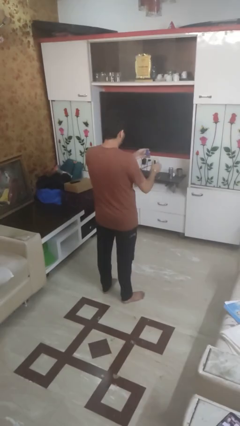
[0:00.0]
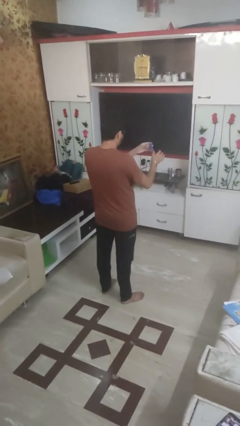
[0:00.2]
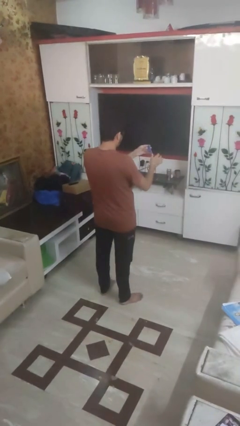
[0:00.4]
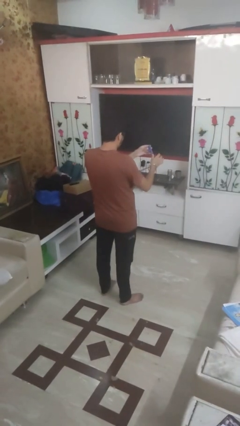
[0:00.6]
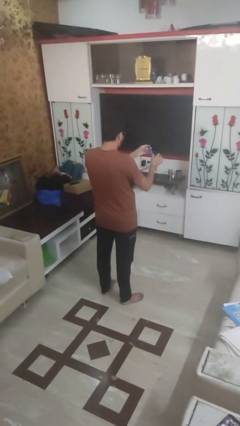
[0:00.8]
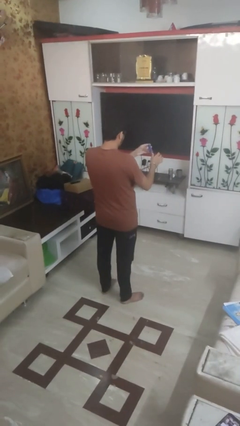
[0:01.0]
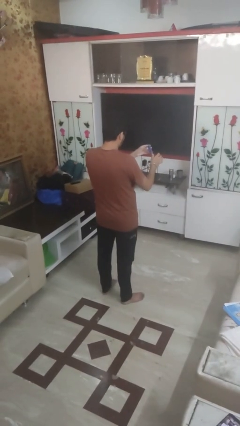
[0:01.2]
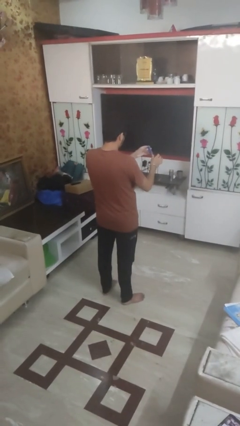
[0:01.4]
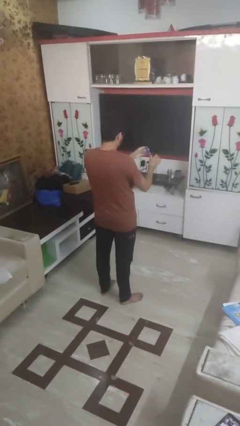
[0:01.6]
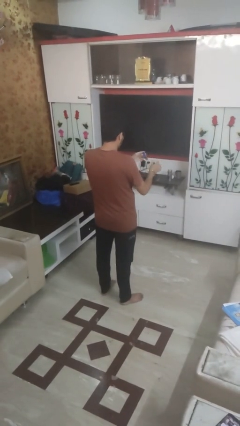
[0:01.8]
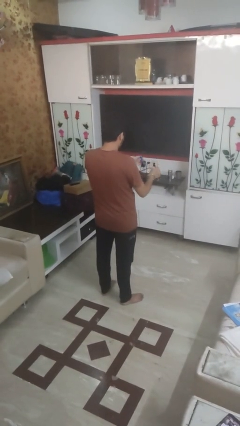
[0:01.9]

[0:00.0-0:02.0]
person clips fingernails

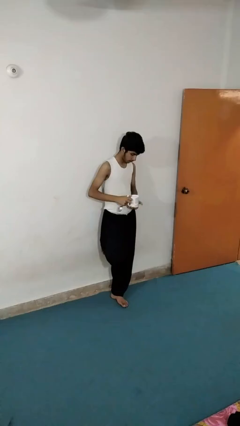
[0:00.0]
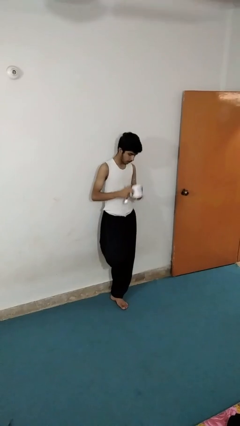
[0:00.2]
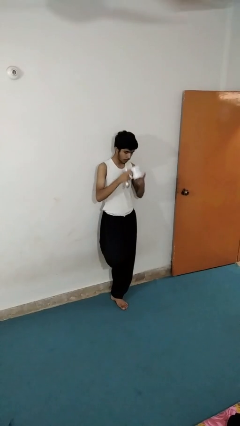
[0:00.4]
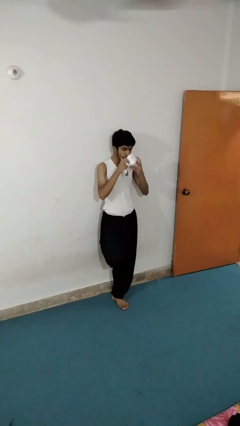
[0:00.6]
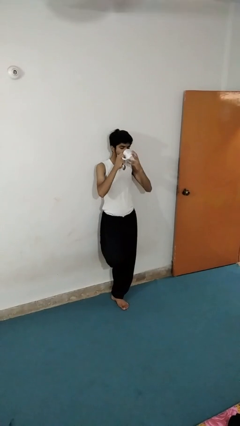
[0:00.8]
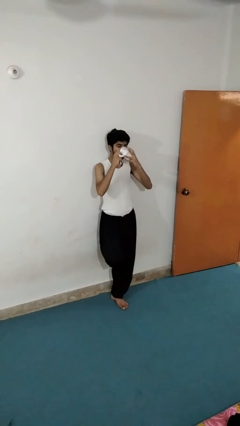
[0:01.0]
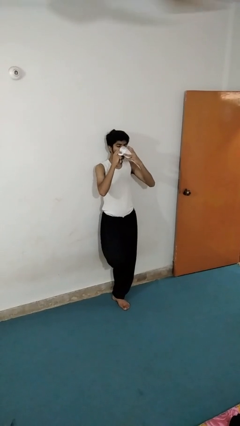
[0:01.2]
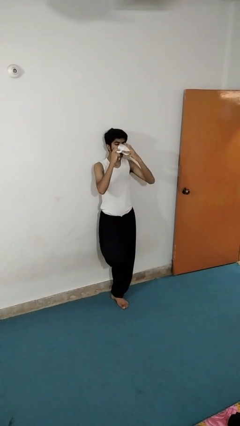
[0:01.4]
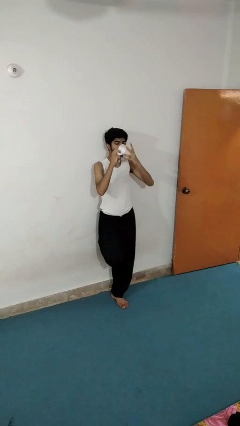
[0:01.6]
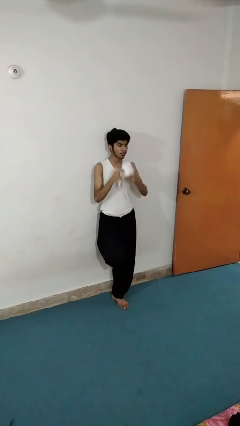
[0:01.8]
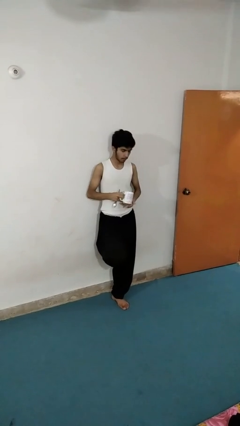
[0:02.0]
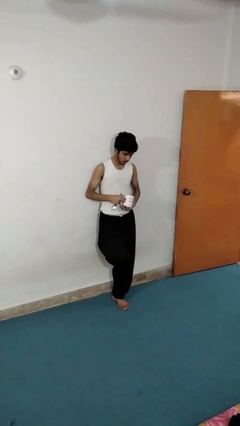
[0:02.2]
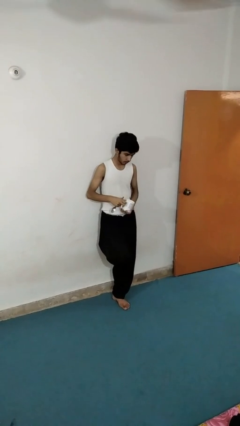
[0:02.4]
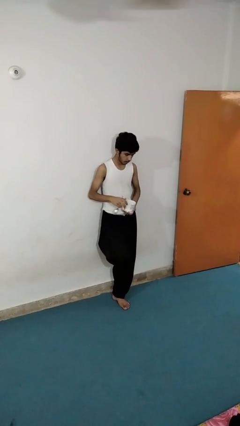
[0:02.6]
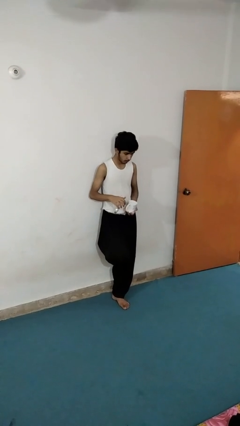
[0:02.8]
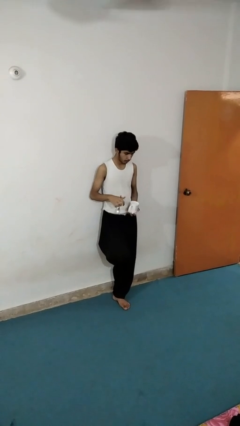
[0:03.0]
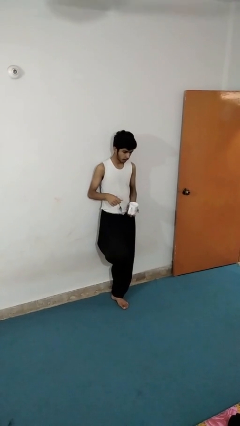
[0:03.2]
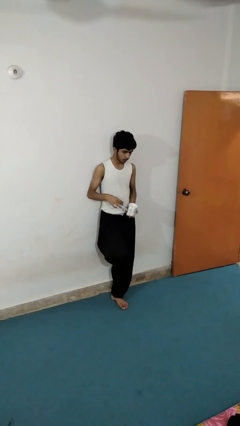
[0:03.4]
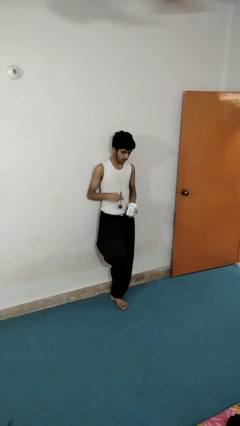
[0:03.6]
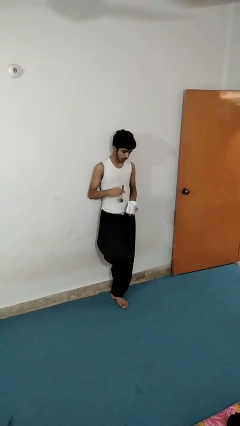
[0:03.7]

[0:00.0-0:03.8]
person drinks from mug

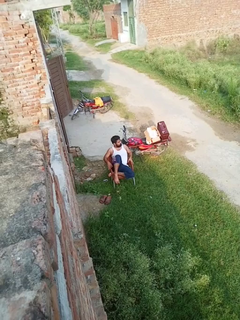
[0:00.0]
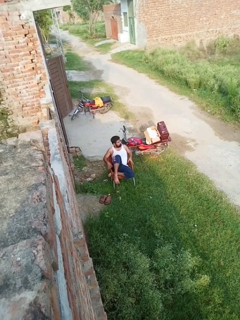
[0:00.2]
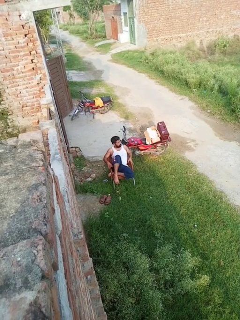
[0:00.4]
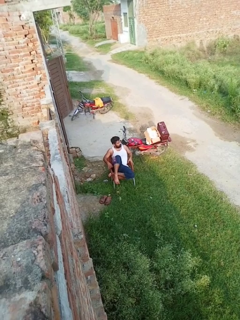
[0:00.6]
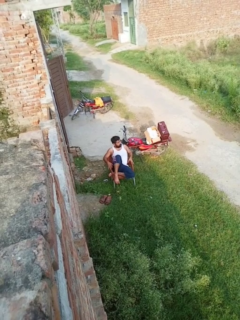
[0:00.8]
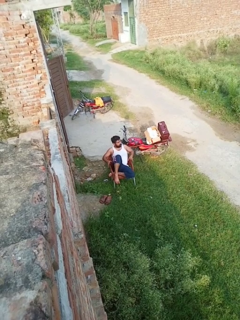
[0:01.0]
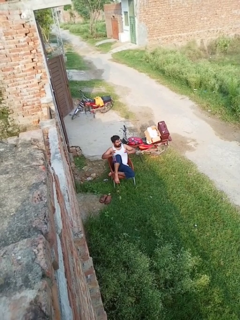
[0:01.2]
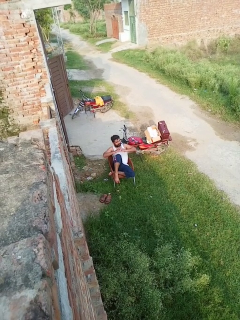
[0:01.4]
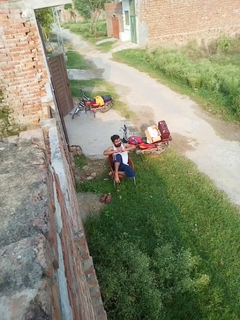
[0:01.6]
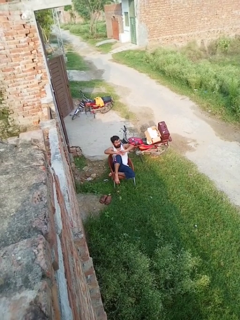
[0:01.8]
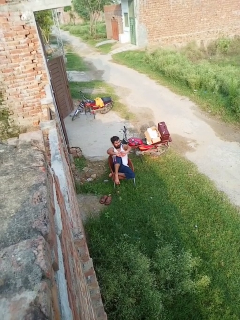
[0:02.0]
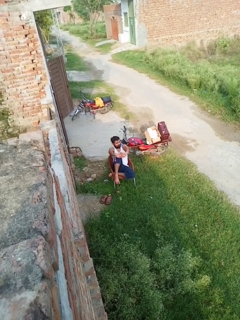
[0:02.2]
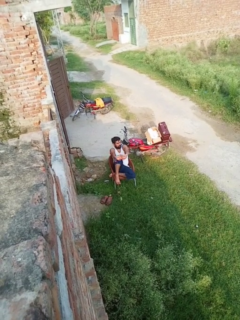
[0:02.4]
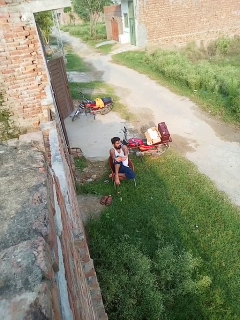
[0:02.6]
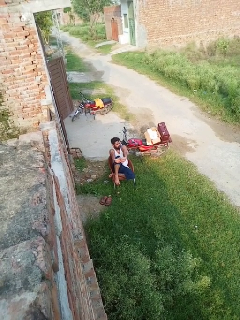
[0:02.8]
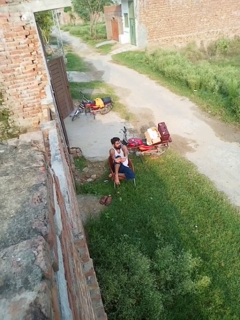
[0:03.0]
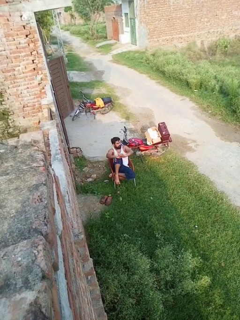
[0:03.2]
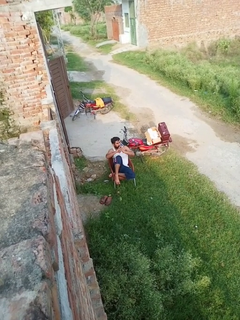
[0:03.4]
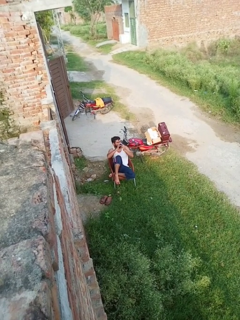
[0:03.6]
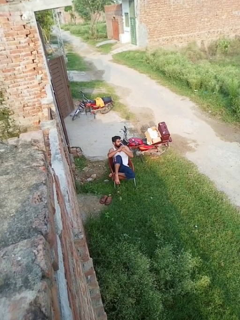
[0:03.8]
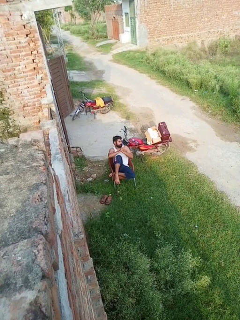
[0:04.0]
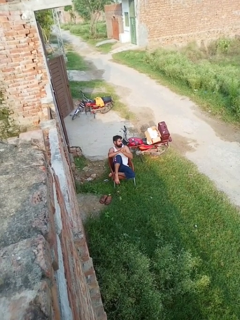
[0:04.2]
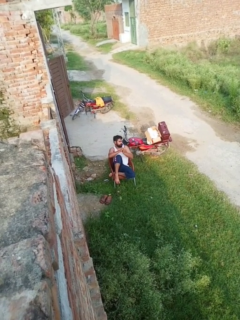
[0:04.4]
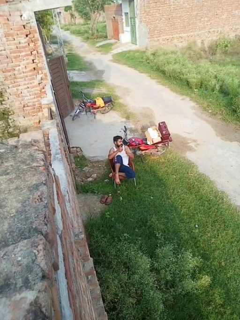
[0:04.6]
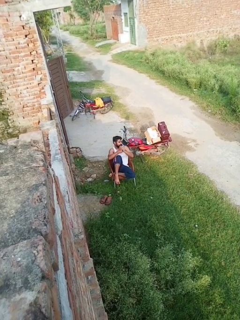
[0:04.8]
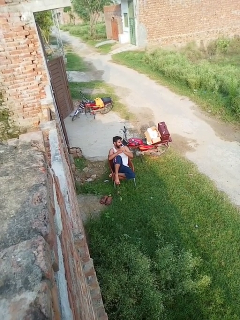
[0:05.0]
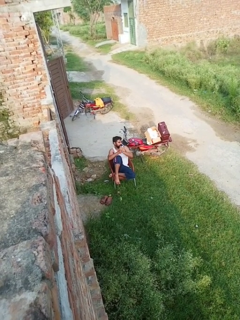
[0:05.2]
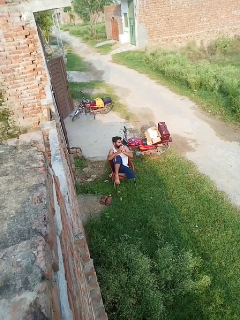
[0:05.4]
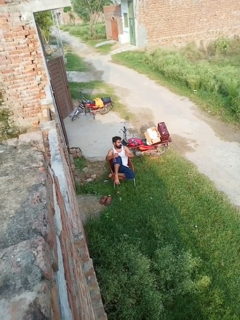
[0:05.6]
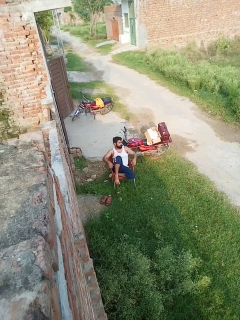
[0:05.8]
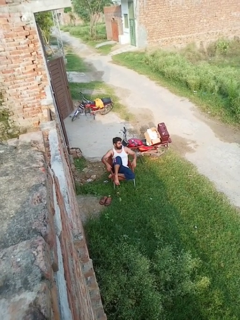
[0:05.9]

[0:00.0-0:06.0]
person cracks knuckles

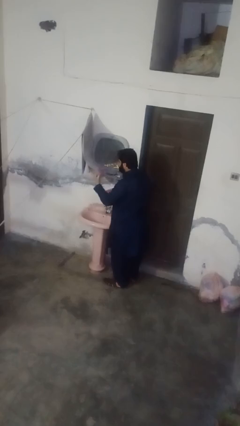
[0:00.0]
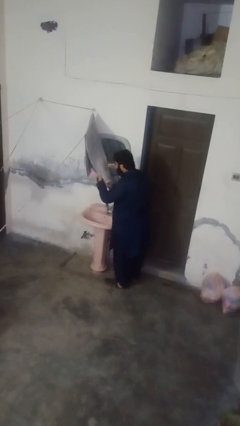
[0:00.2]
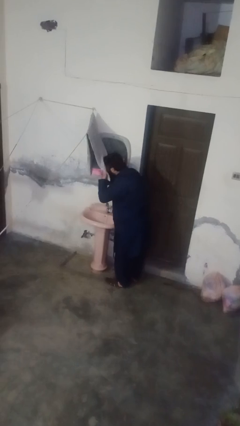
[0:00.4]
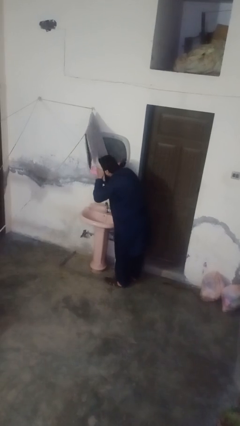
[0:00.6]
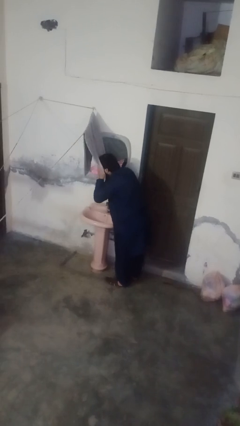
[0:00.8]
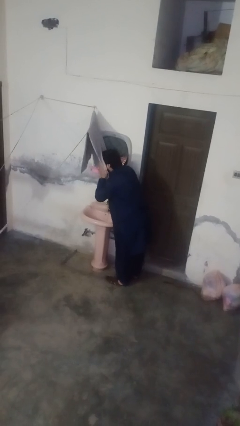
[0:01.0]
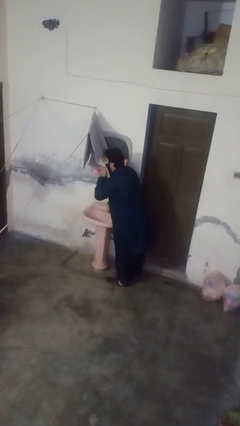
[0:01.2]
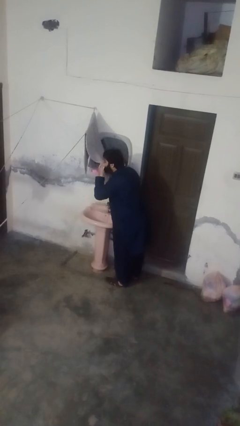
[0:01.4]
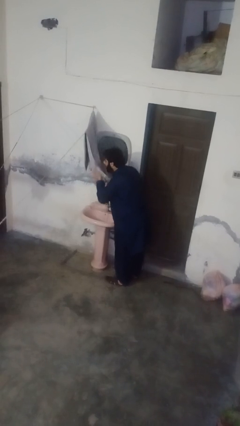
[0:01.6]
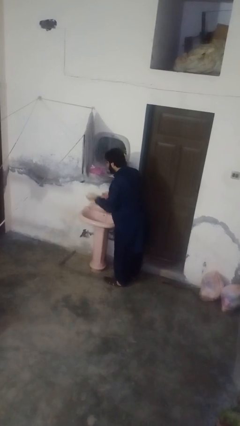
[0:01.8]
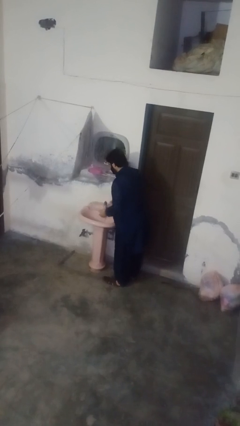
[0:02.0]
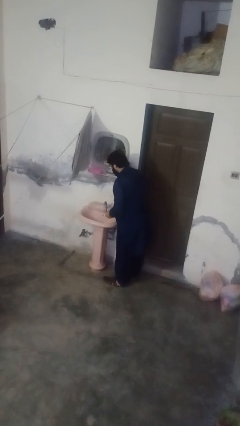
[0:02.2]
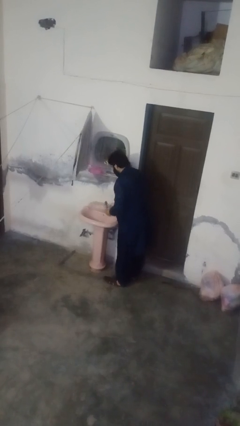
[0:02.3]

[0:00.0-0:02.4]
person dries face with towel

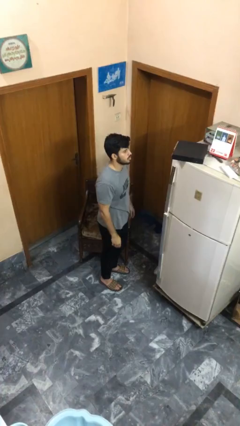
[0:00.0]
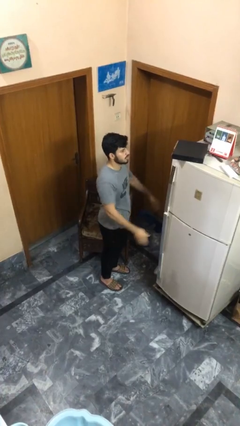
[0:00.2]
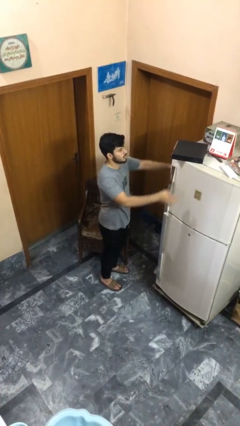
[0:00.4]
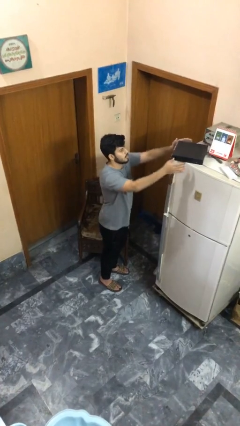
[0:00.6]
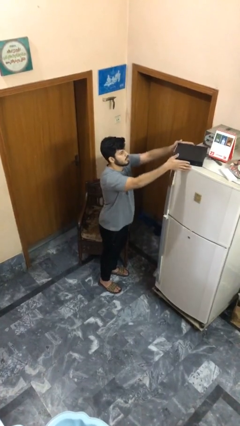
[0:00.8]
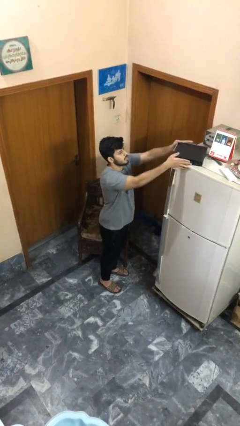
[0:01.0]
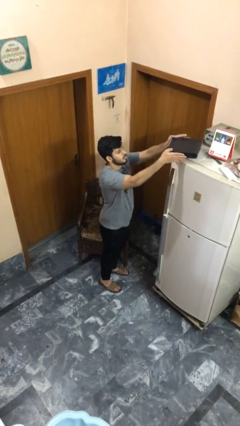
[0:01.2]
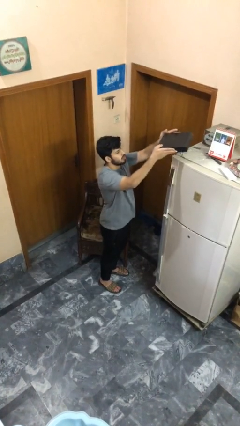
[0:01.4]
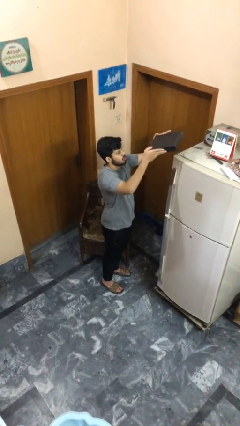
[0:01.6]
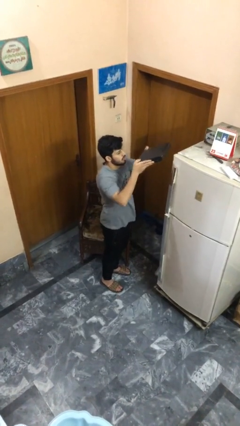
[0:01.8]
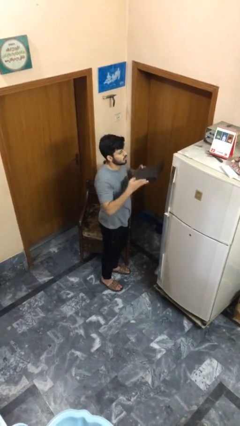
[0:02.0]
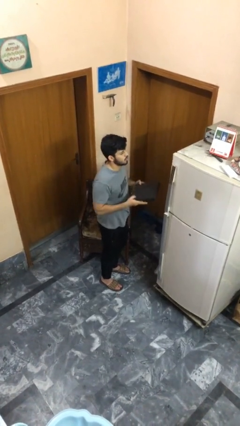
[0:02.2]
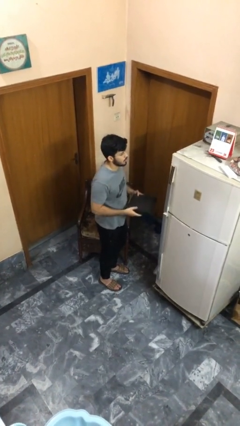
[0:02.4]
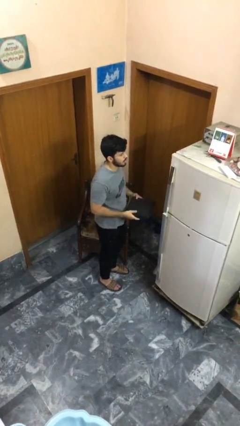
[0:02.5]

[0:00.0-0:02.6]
person picks up object from countertop

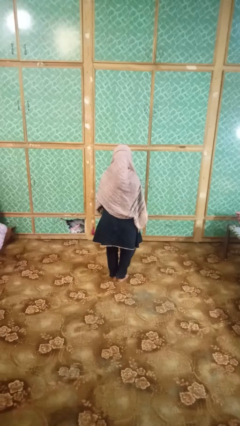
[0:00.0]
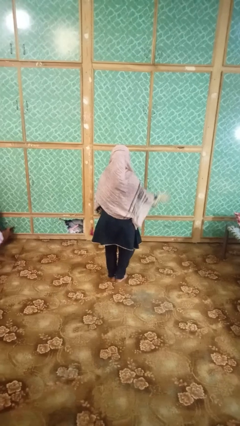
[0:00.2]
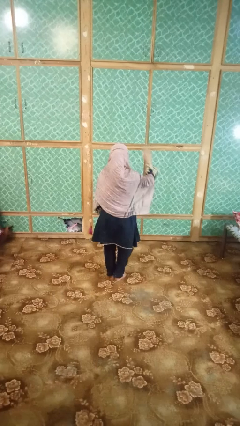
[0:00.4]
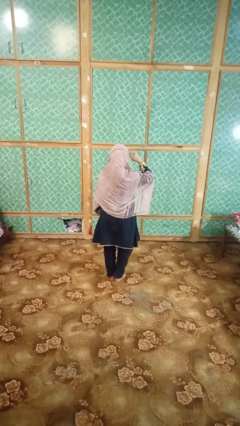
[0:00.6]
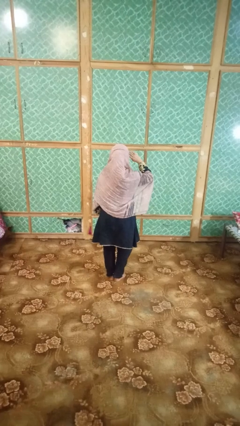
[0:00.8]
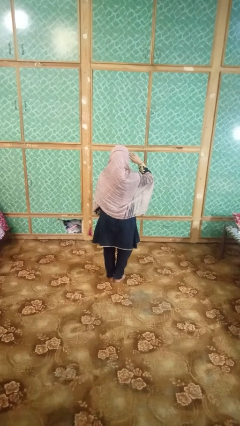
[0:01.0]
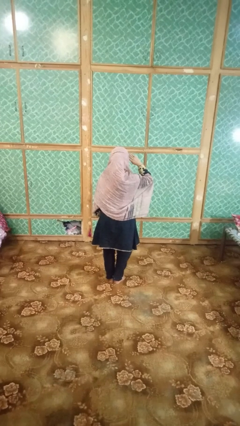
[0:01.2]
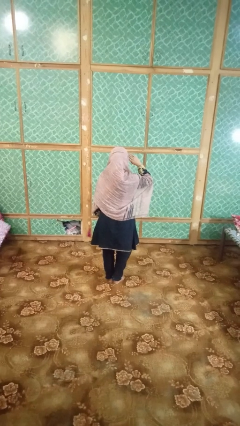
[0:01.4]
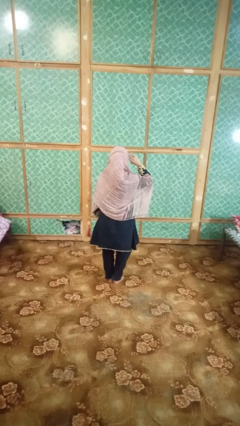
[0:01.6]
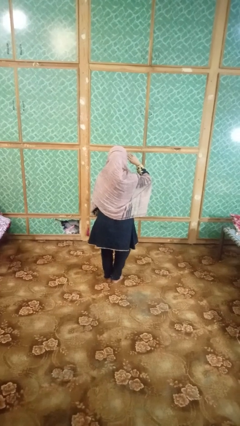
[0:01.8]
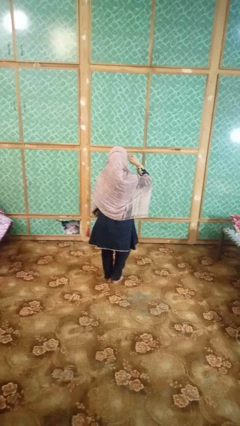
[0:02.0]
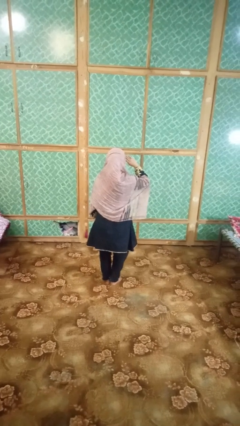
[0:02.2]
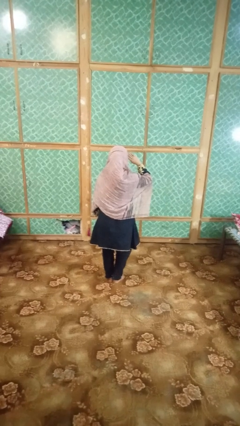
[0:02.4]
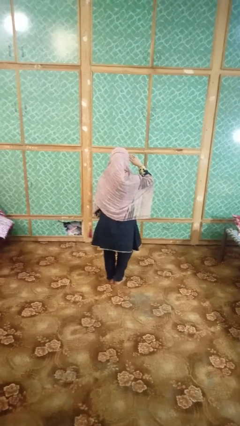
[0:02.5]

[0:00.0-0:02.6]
person salutes
